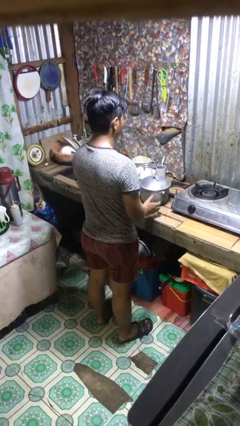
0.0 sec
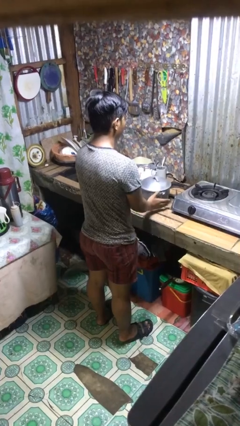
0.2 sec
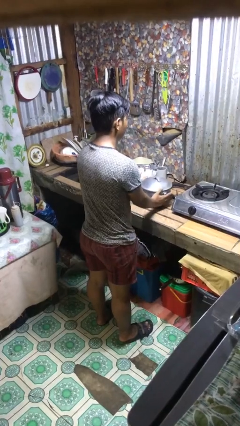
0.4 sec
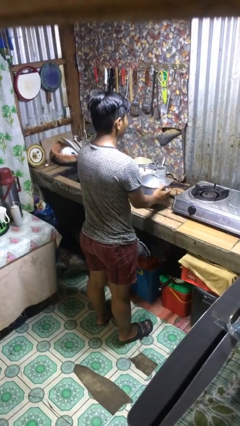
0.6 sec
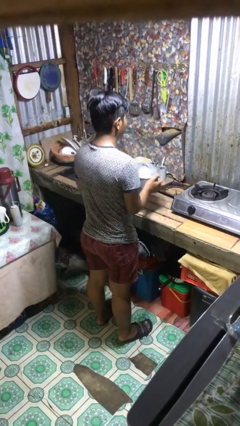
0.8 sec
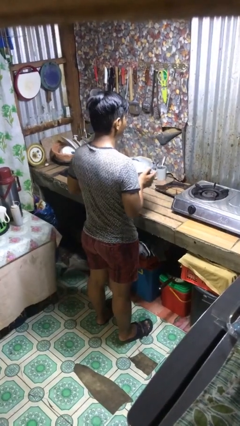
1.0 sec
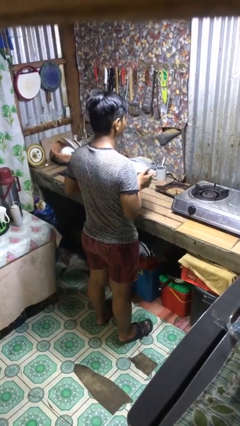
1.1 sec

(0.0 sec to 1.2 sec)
person picks up object from countertop

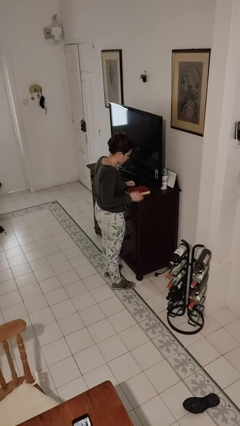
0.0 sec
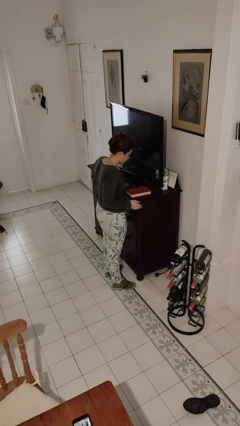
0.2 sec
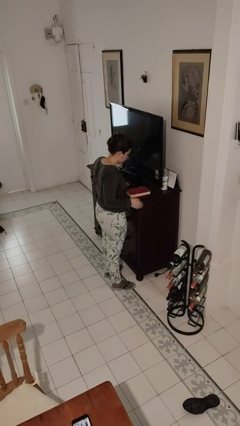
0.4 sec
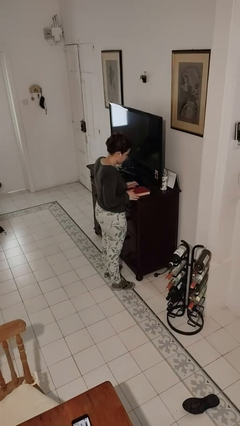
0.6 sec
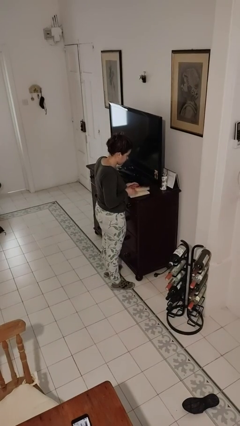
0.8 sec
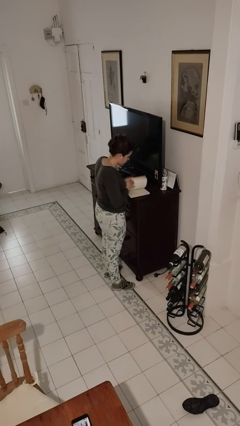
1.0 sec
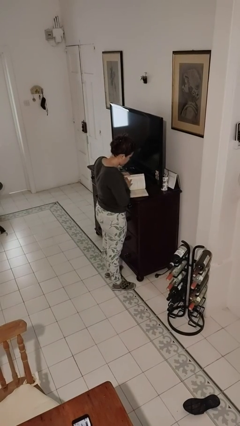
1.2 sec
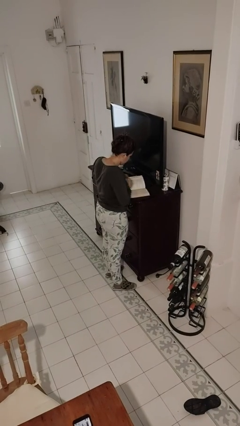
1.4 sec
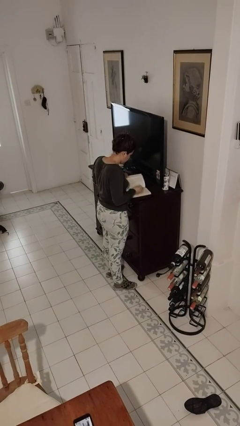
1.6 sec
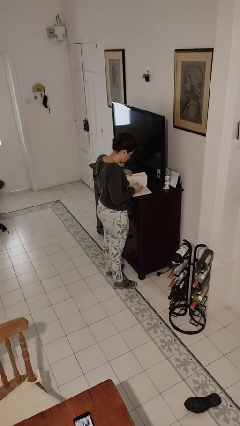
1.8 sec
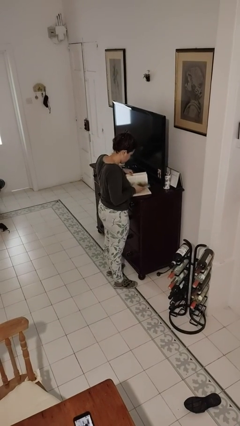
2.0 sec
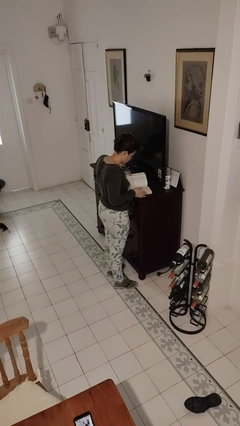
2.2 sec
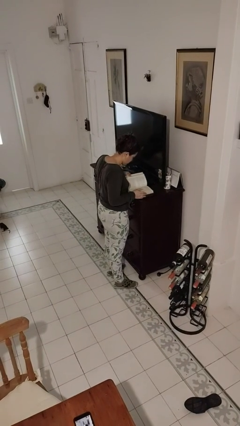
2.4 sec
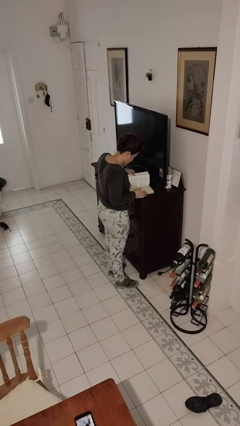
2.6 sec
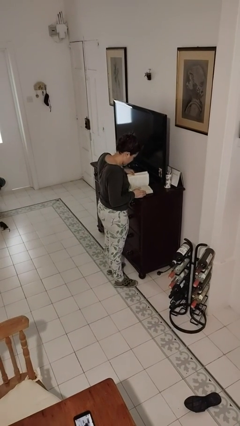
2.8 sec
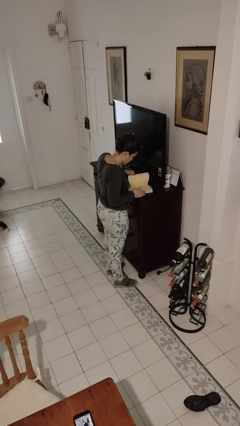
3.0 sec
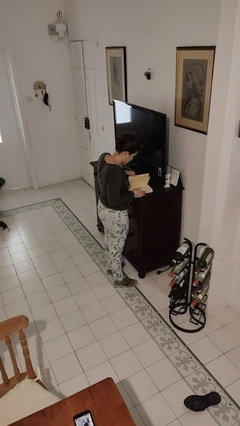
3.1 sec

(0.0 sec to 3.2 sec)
person reads book

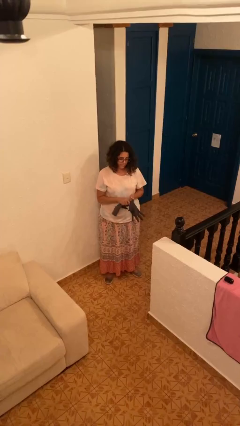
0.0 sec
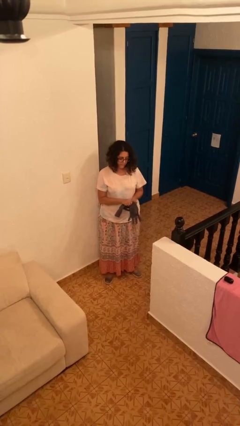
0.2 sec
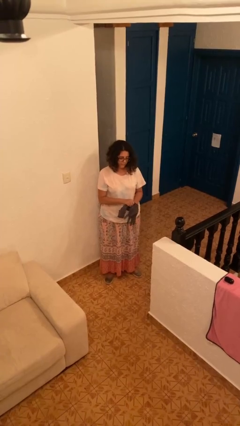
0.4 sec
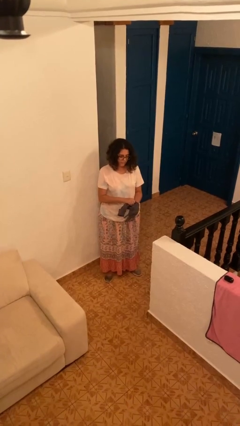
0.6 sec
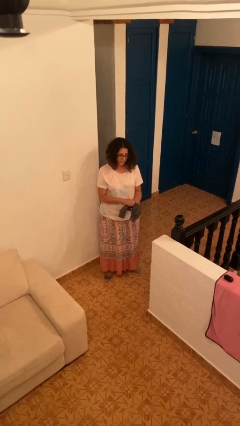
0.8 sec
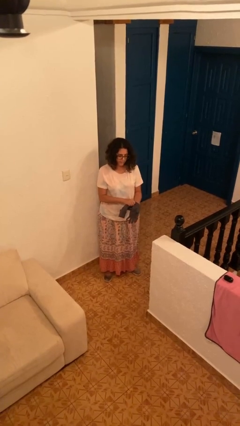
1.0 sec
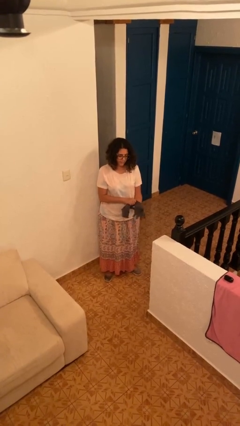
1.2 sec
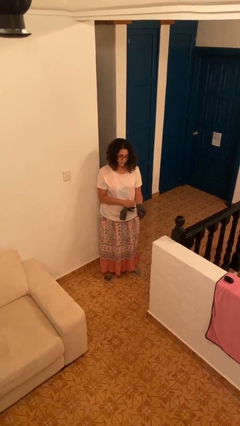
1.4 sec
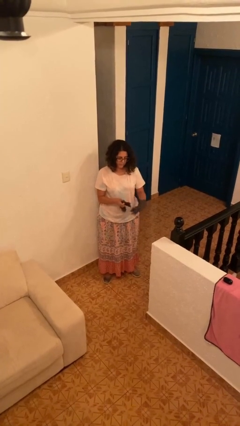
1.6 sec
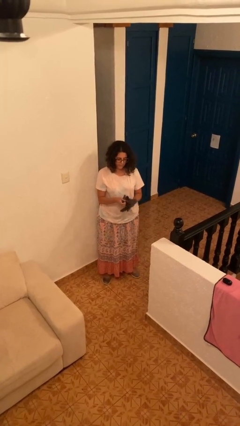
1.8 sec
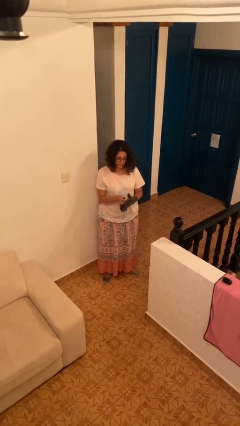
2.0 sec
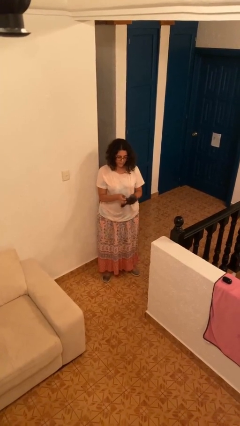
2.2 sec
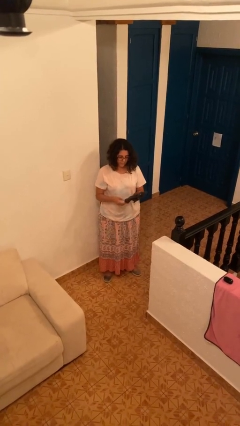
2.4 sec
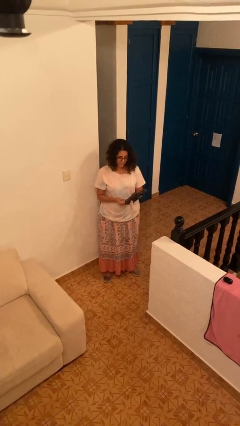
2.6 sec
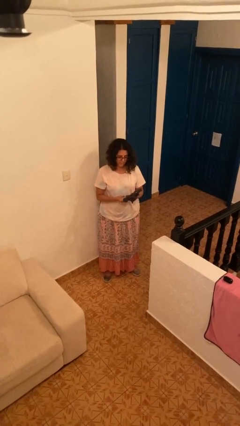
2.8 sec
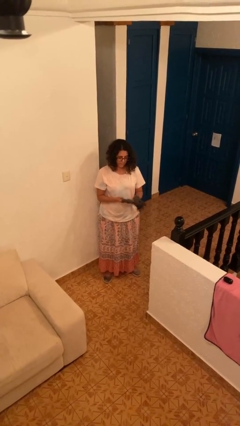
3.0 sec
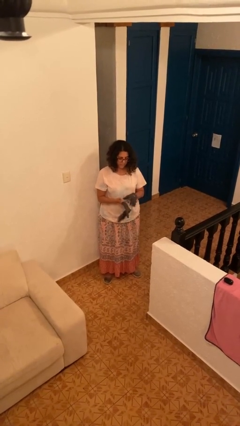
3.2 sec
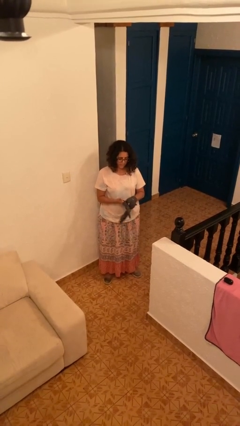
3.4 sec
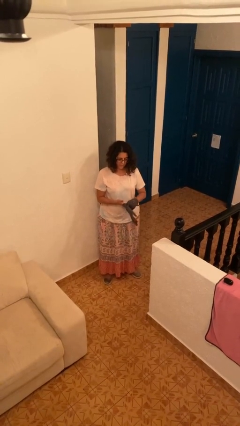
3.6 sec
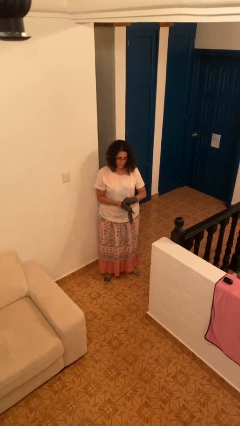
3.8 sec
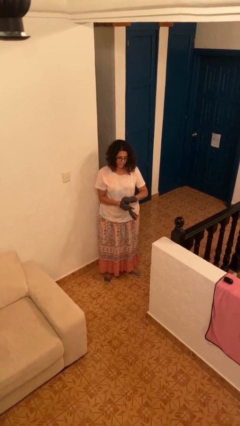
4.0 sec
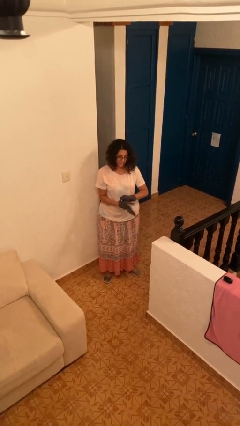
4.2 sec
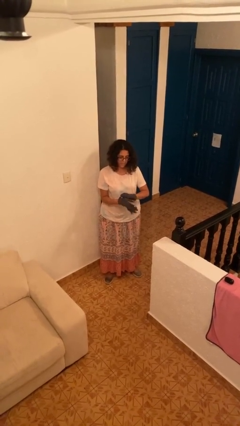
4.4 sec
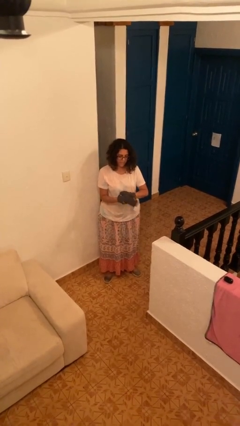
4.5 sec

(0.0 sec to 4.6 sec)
person puts on gloves

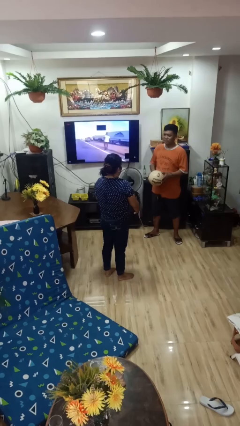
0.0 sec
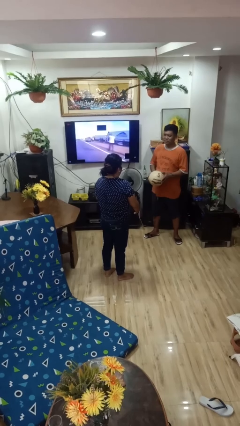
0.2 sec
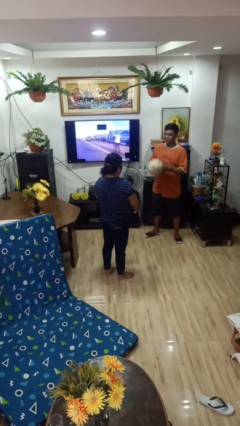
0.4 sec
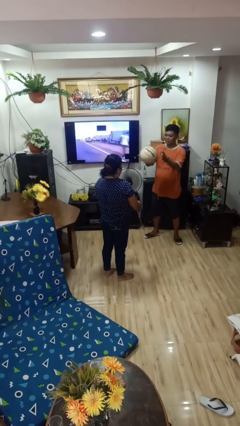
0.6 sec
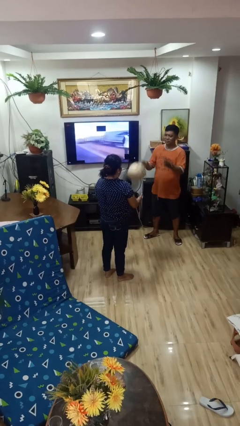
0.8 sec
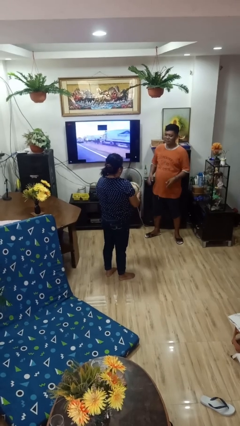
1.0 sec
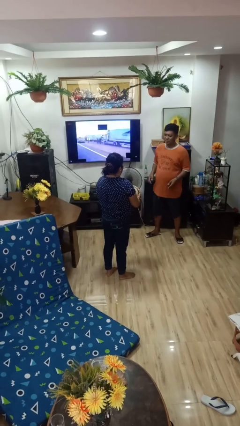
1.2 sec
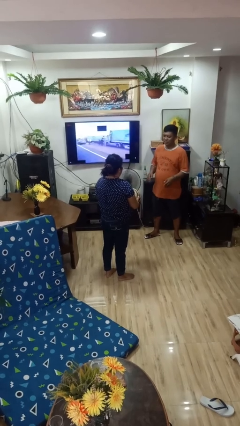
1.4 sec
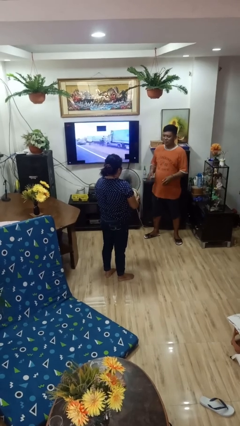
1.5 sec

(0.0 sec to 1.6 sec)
person catches object from person

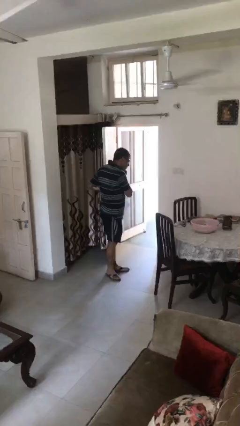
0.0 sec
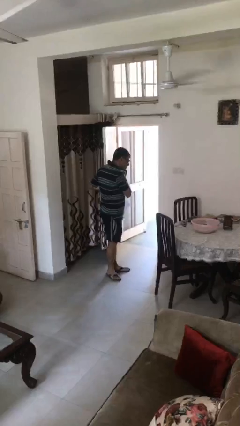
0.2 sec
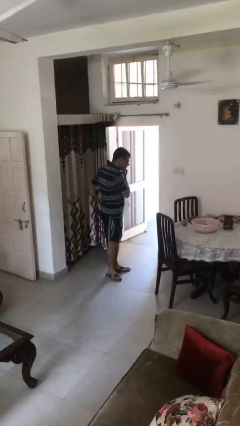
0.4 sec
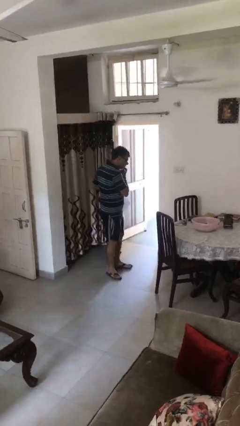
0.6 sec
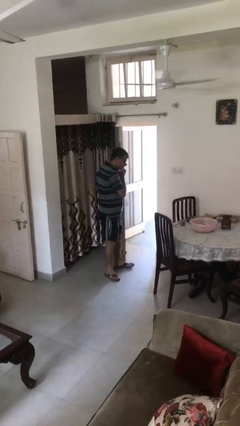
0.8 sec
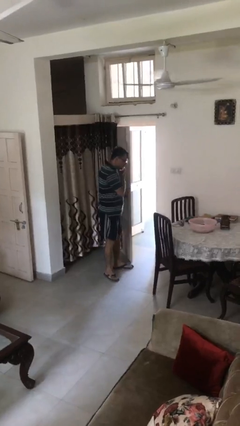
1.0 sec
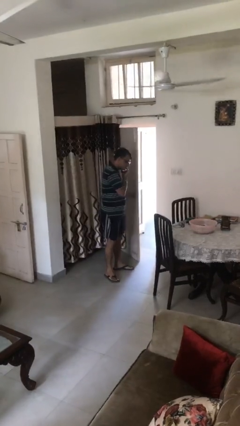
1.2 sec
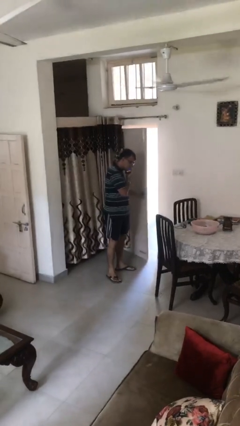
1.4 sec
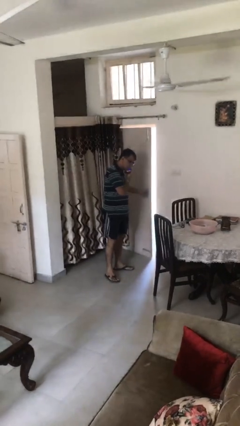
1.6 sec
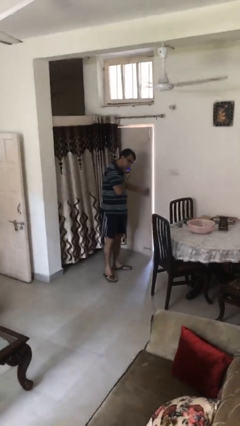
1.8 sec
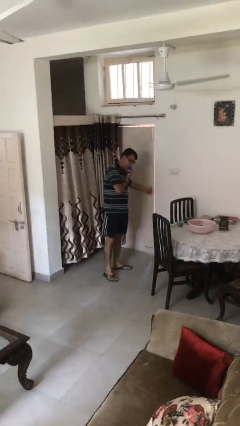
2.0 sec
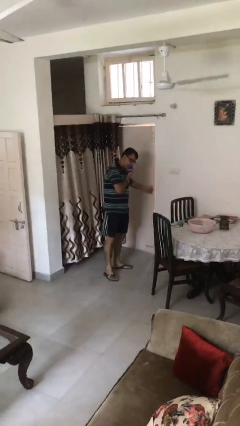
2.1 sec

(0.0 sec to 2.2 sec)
person closes facility door

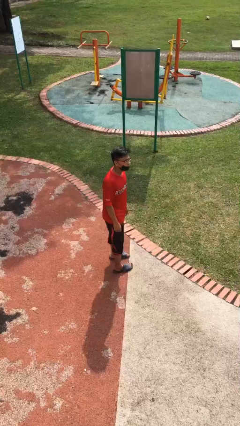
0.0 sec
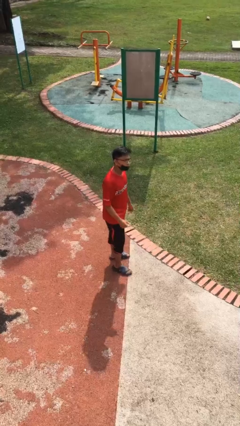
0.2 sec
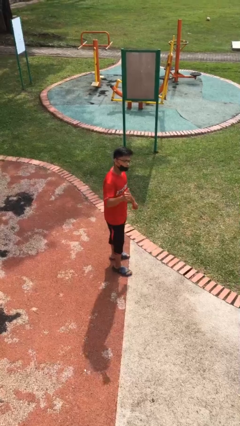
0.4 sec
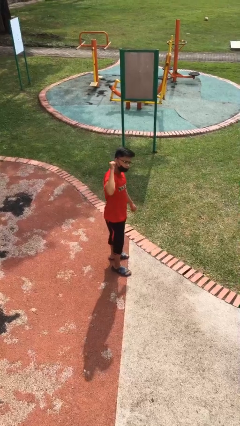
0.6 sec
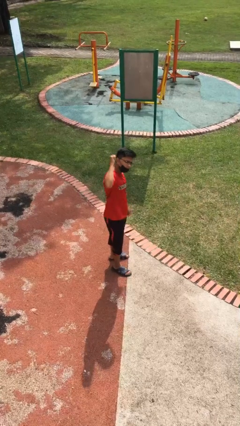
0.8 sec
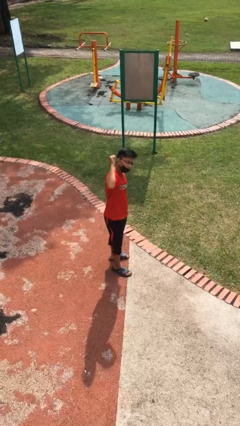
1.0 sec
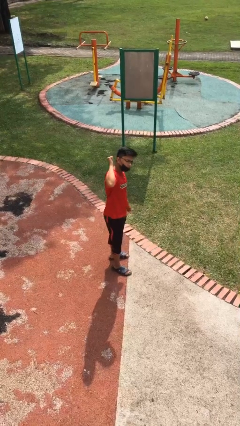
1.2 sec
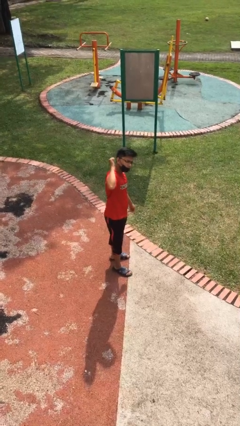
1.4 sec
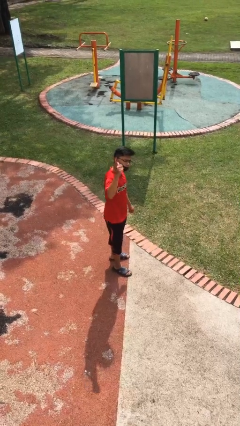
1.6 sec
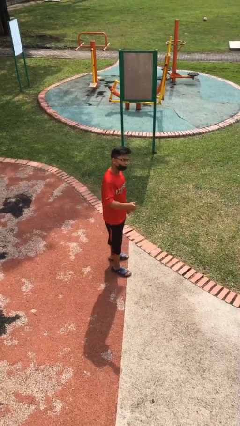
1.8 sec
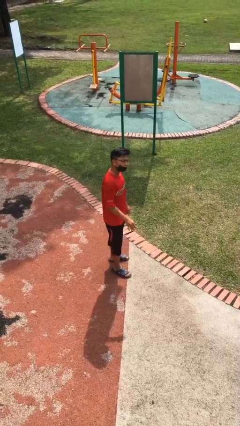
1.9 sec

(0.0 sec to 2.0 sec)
person gestures behind me

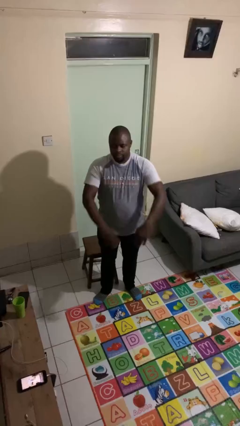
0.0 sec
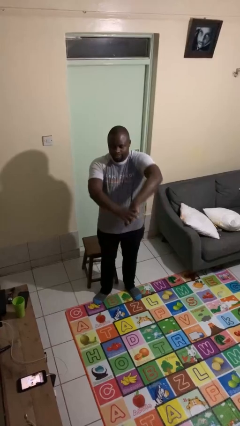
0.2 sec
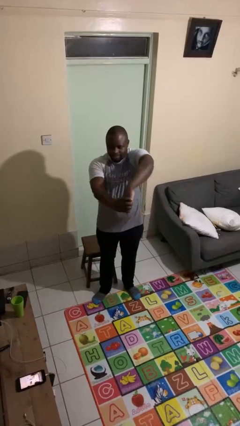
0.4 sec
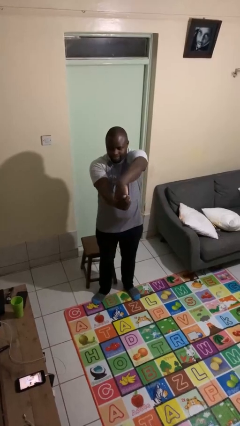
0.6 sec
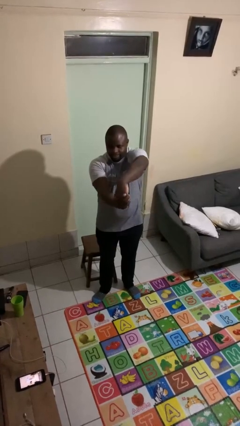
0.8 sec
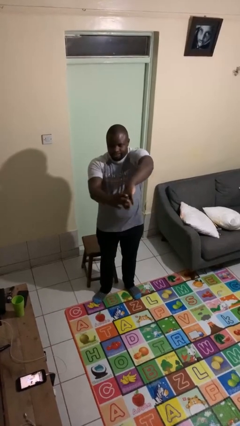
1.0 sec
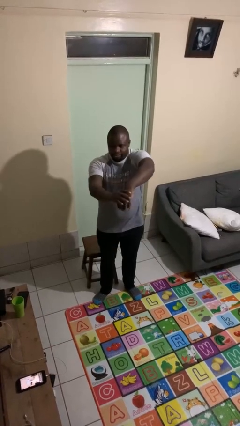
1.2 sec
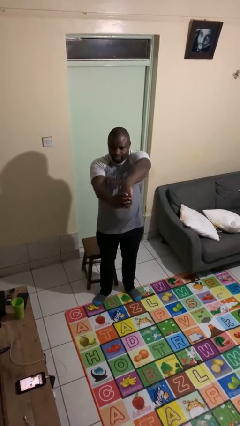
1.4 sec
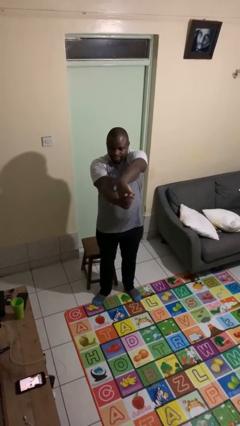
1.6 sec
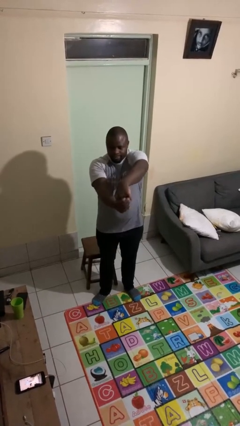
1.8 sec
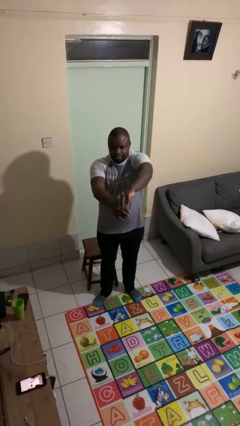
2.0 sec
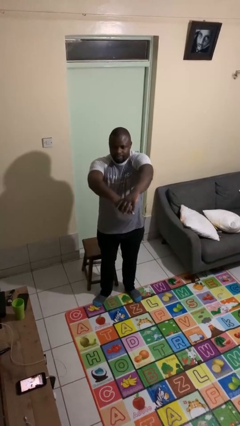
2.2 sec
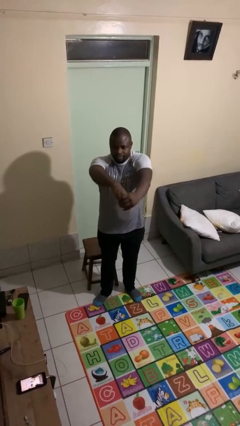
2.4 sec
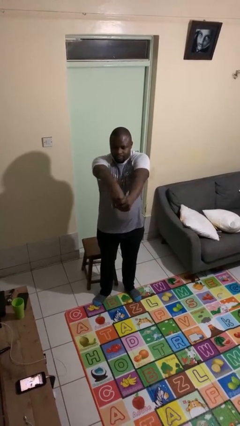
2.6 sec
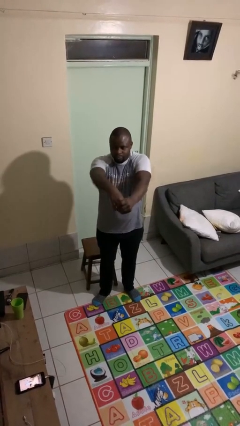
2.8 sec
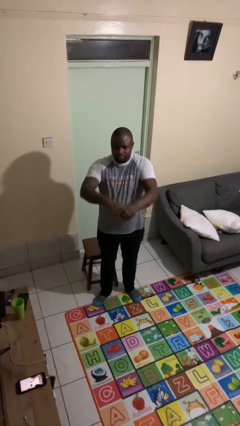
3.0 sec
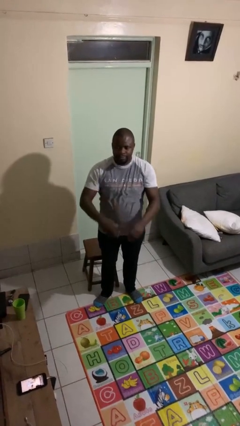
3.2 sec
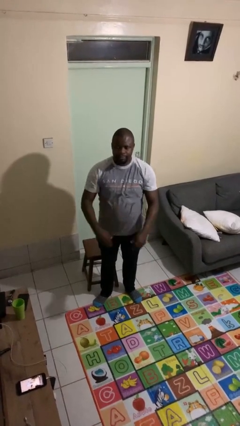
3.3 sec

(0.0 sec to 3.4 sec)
person cracks knuckles
